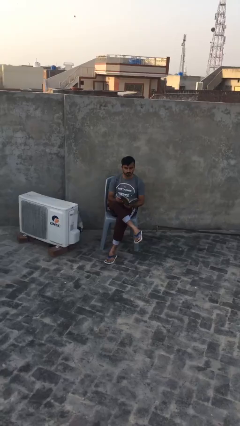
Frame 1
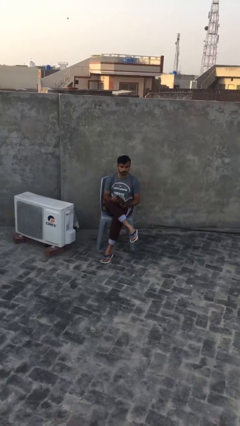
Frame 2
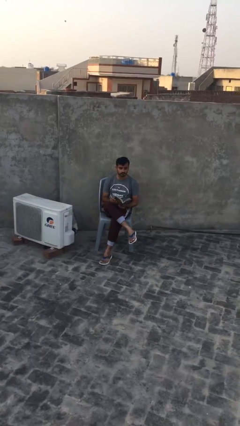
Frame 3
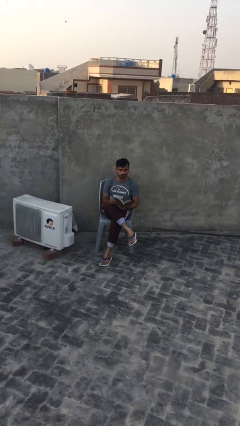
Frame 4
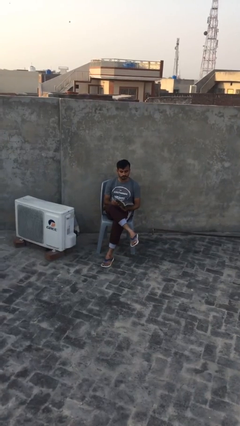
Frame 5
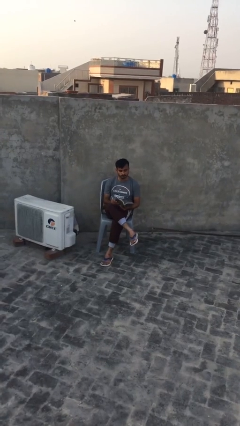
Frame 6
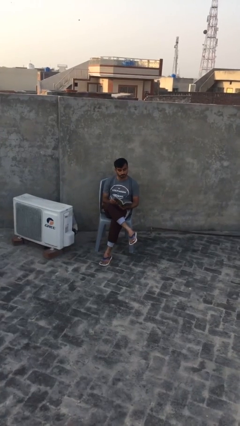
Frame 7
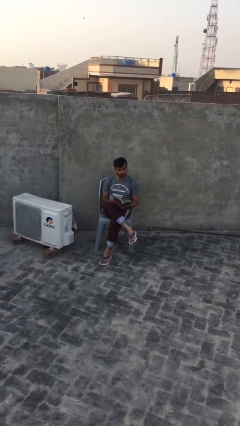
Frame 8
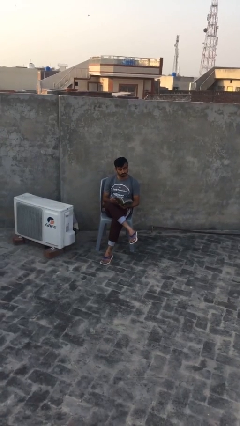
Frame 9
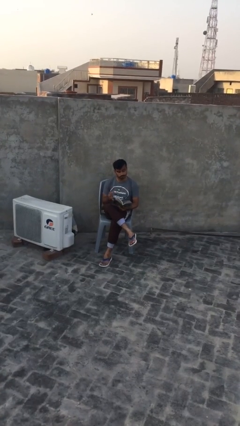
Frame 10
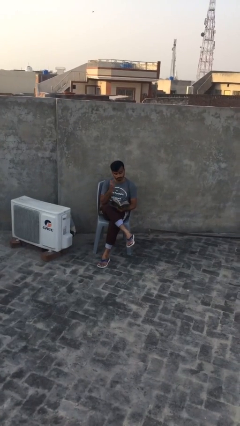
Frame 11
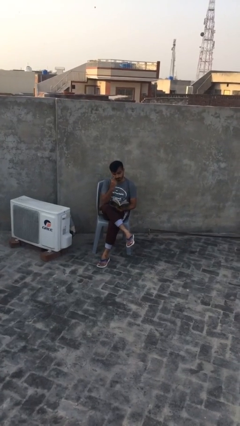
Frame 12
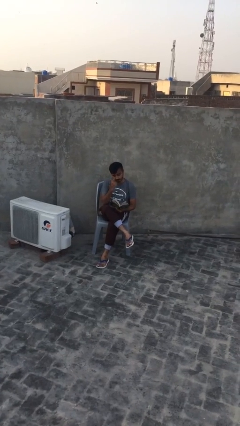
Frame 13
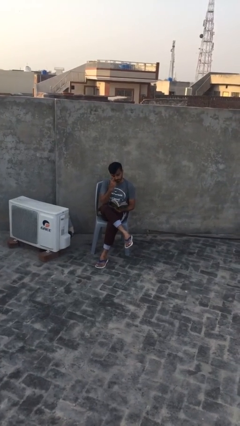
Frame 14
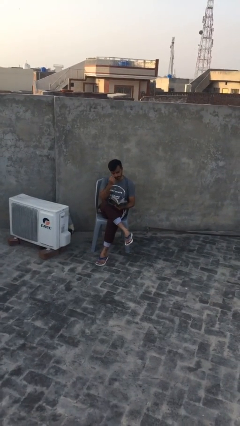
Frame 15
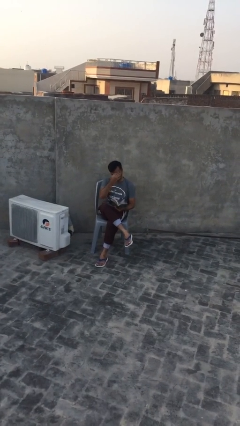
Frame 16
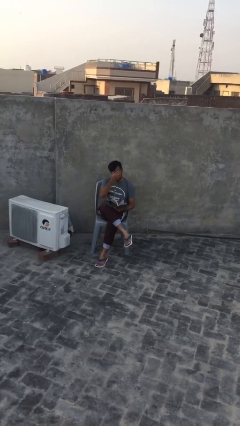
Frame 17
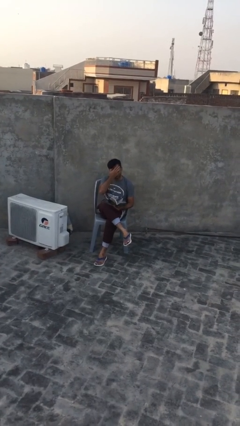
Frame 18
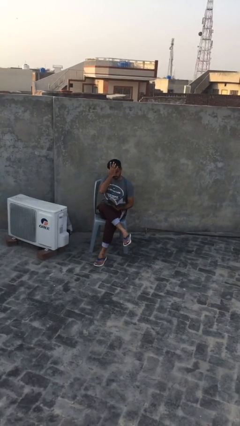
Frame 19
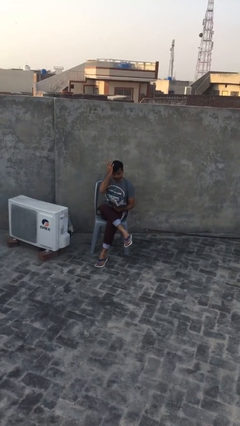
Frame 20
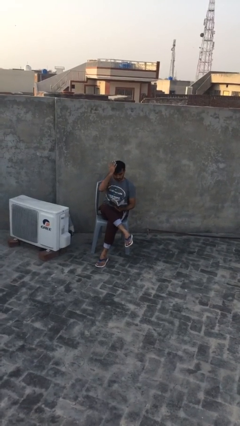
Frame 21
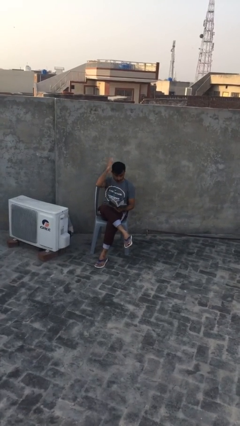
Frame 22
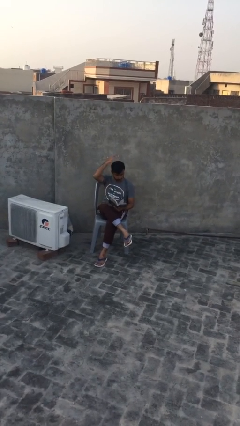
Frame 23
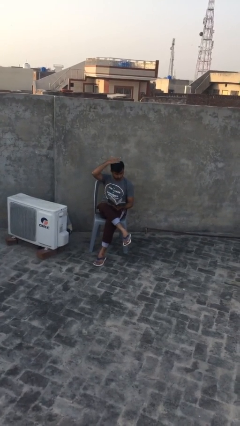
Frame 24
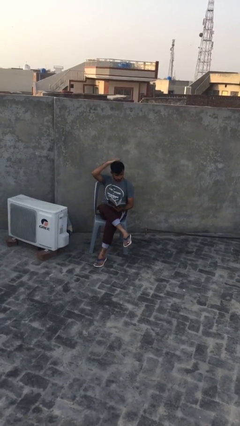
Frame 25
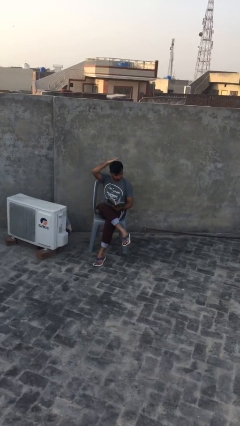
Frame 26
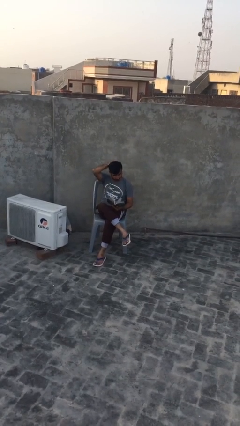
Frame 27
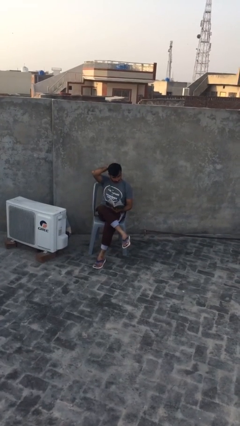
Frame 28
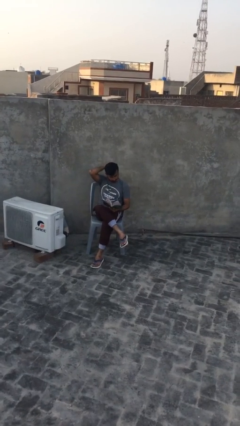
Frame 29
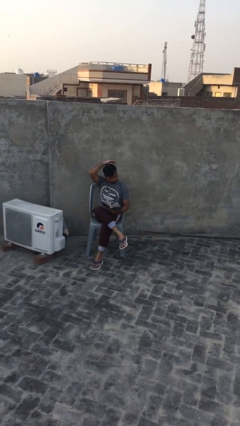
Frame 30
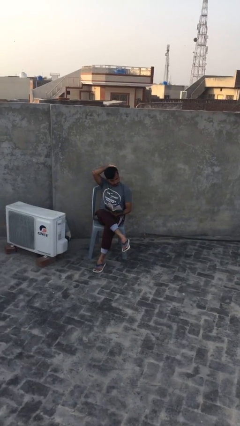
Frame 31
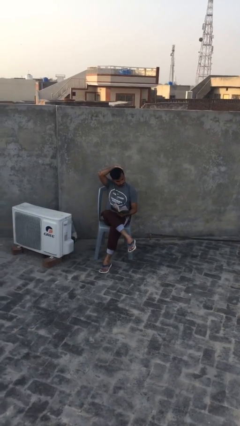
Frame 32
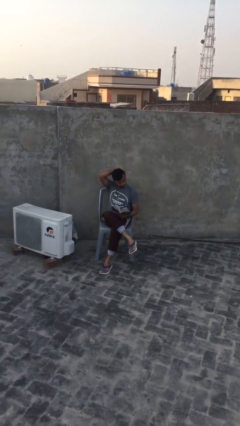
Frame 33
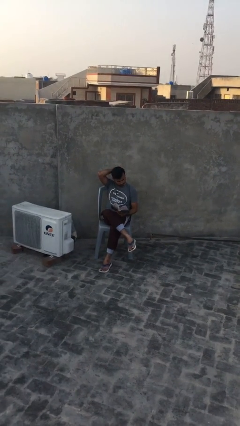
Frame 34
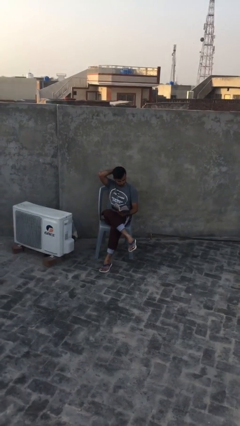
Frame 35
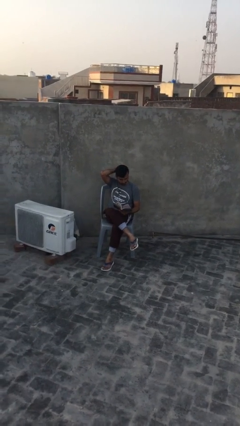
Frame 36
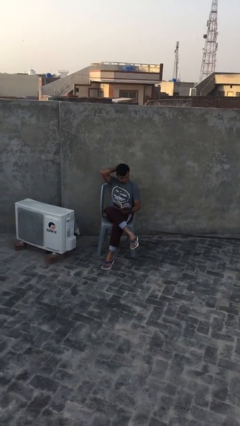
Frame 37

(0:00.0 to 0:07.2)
person reads document

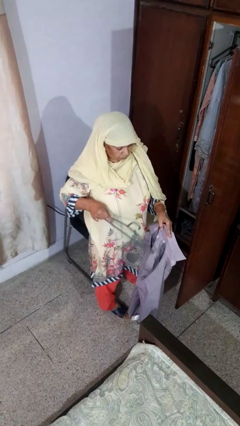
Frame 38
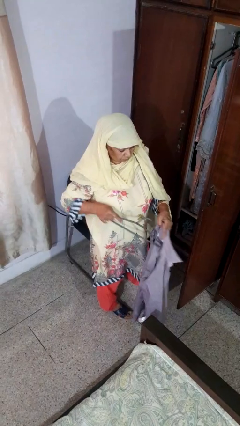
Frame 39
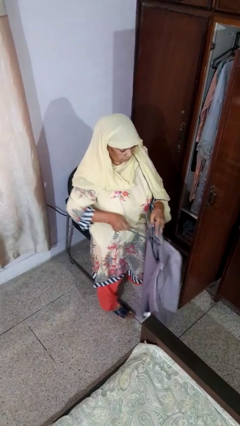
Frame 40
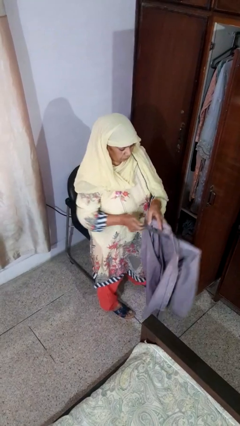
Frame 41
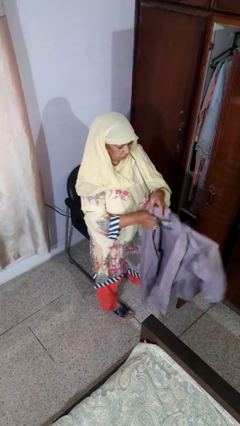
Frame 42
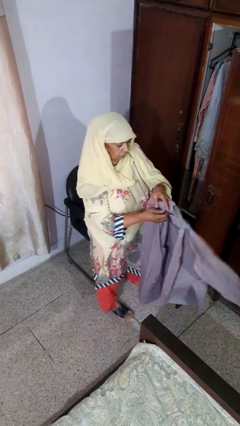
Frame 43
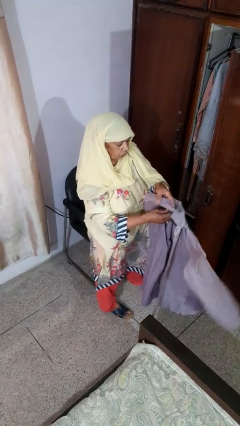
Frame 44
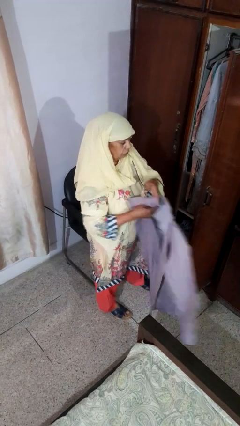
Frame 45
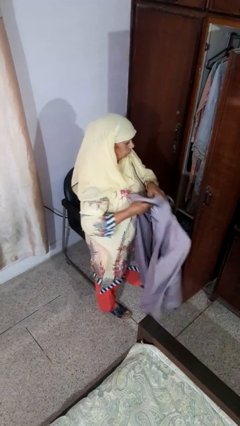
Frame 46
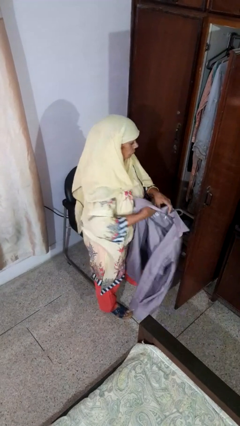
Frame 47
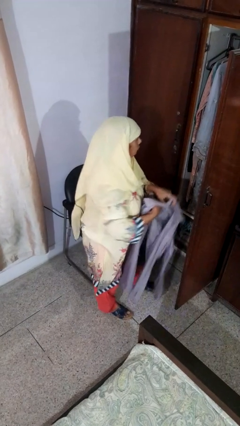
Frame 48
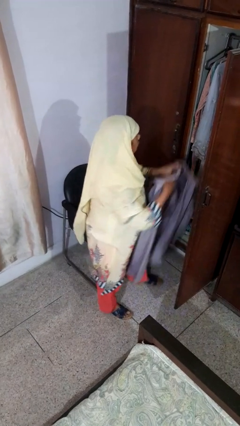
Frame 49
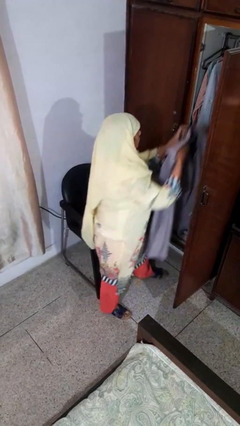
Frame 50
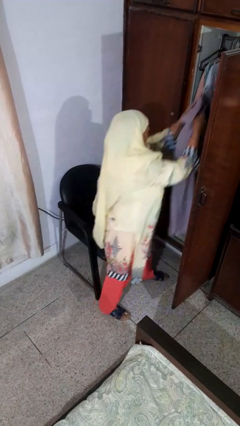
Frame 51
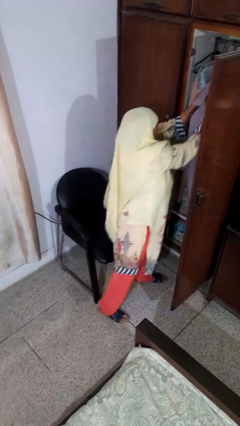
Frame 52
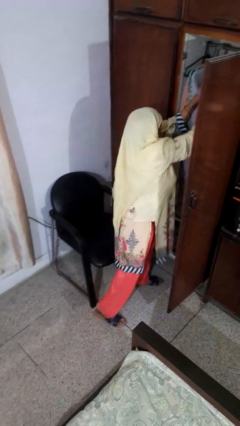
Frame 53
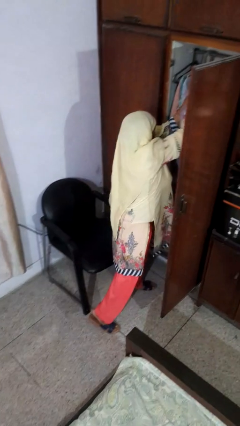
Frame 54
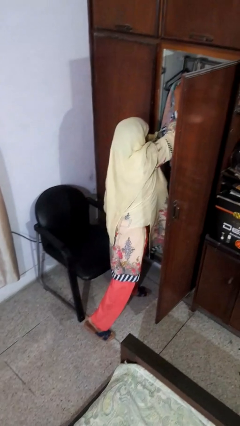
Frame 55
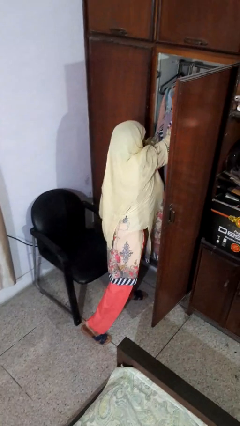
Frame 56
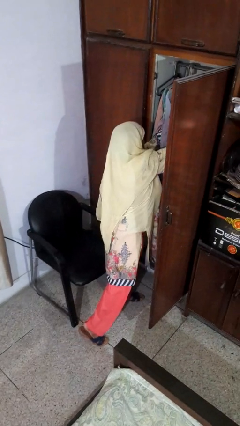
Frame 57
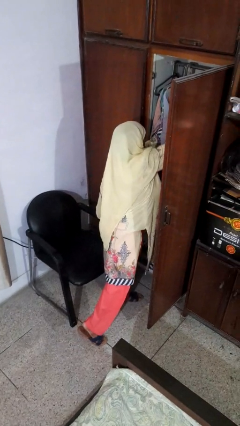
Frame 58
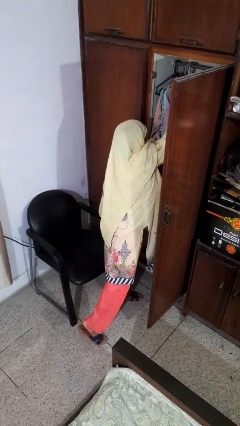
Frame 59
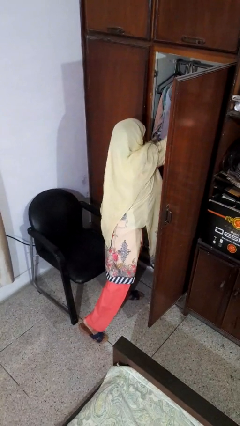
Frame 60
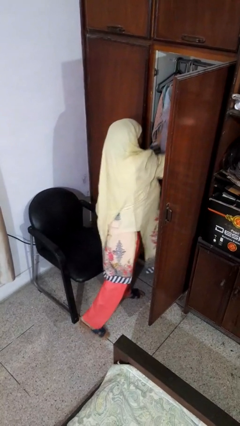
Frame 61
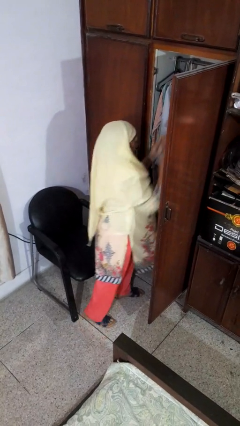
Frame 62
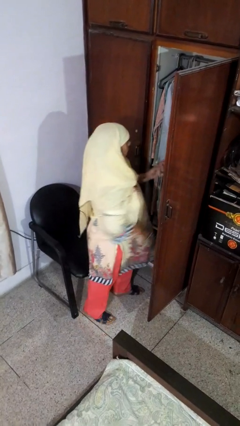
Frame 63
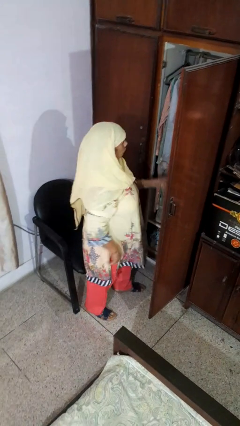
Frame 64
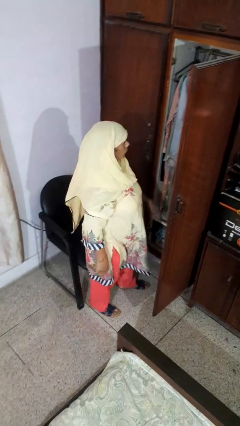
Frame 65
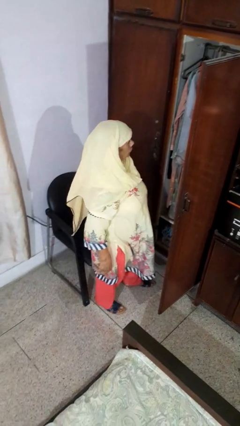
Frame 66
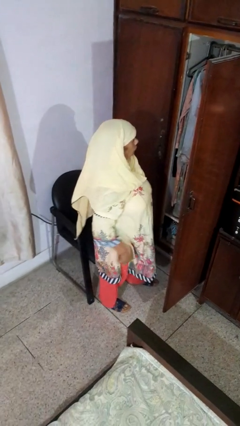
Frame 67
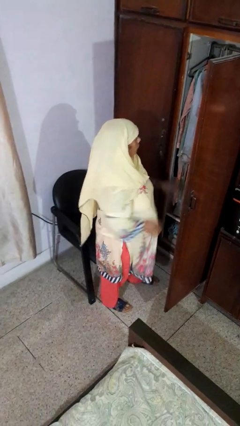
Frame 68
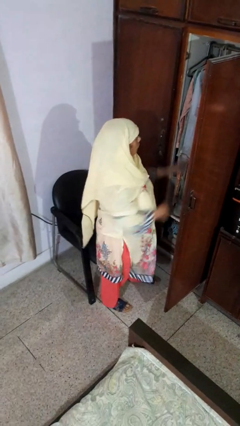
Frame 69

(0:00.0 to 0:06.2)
person puts clothes into closet

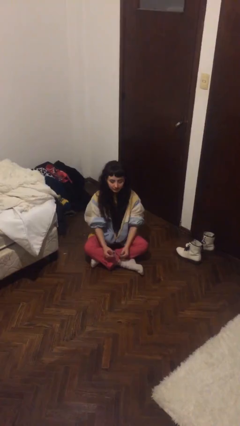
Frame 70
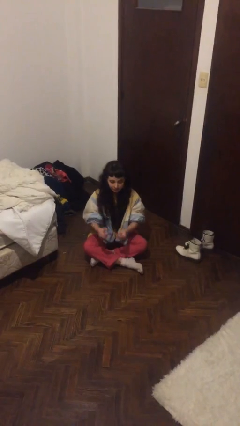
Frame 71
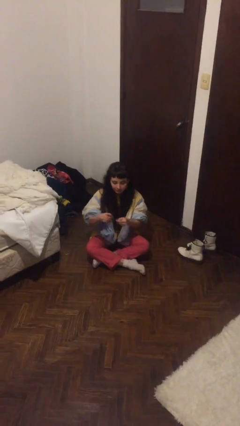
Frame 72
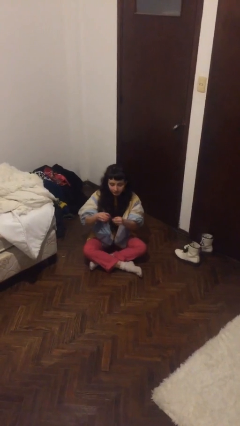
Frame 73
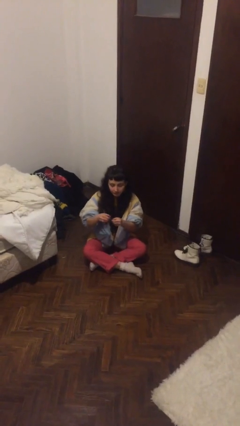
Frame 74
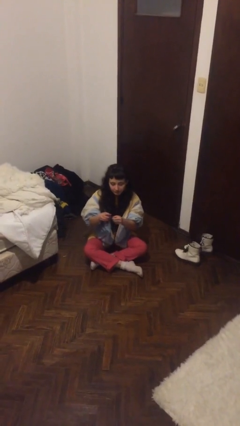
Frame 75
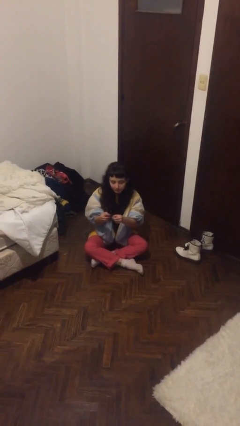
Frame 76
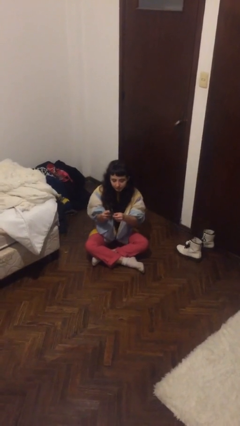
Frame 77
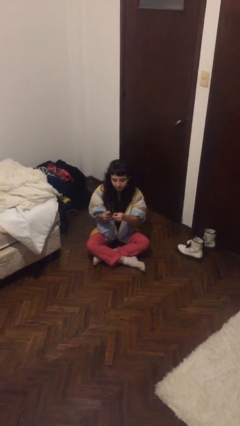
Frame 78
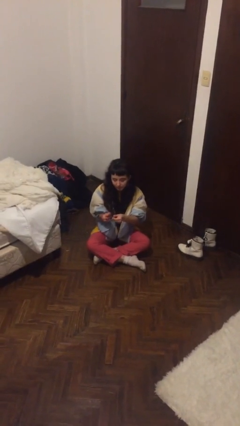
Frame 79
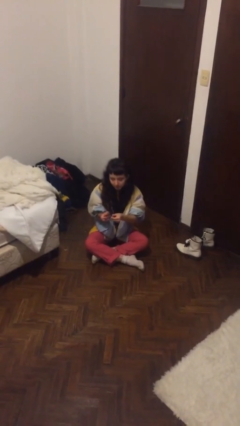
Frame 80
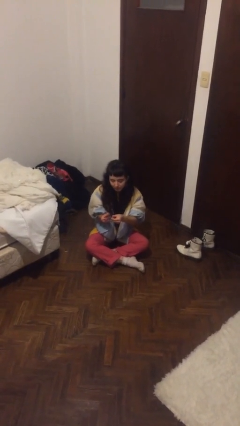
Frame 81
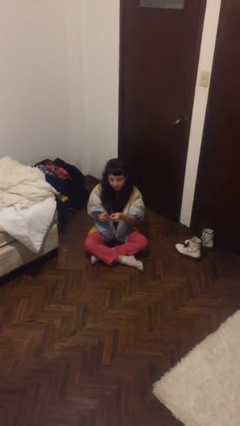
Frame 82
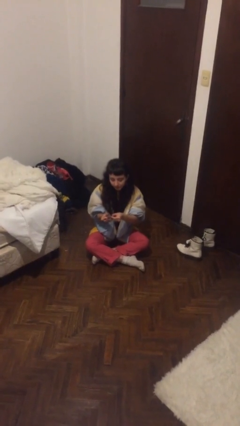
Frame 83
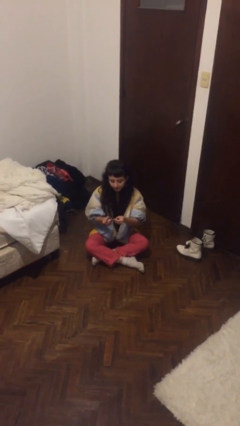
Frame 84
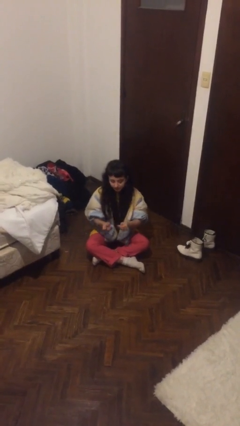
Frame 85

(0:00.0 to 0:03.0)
person clips fingernails

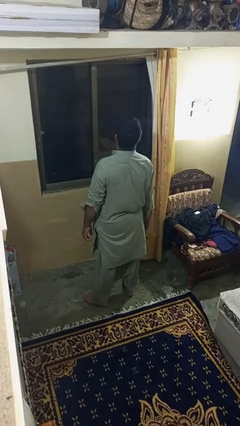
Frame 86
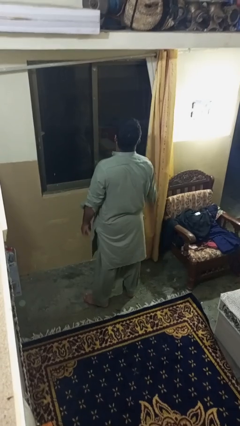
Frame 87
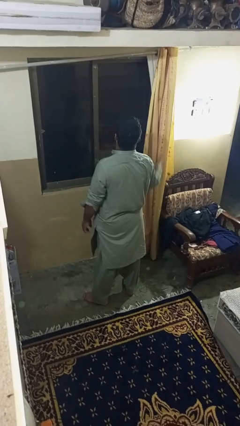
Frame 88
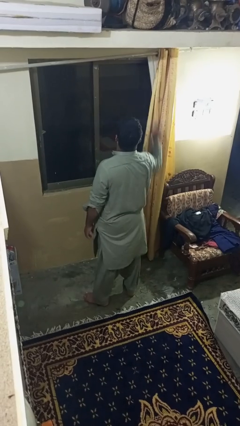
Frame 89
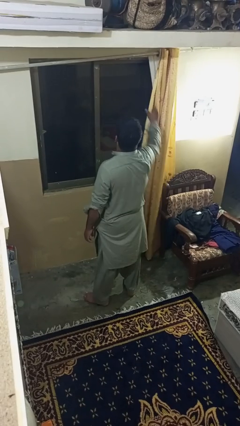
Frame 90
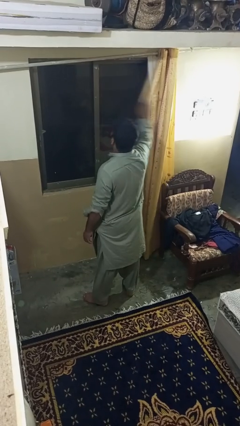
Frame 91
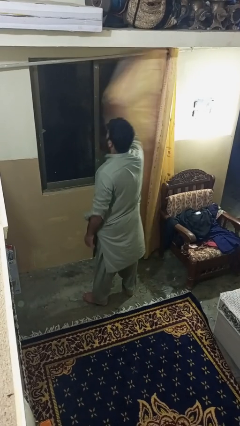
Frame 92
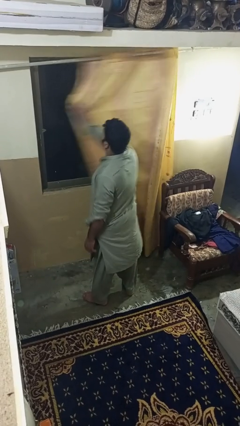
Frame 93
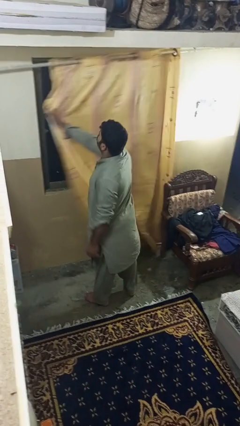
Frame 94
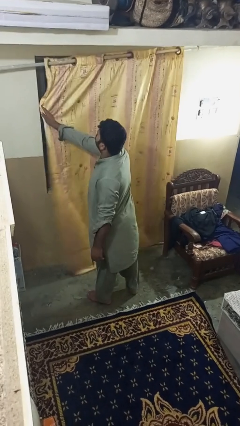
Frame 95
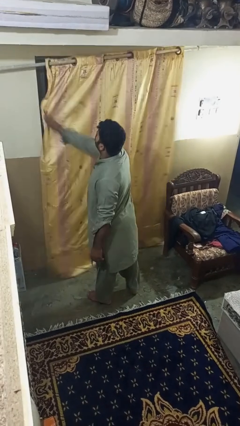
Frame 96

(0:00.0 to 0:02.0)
person closes curtains
